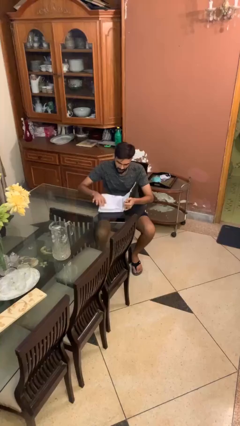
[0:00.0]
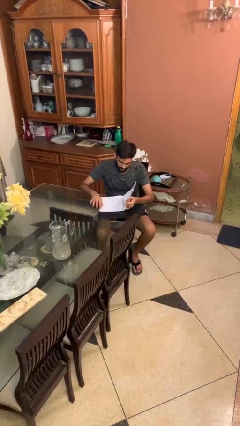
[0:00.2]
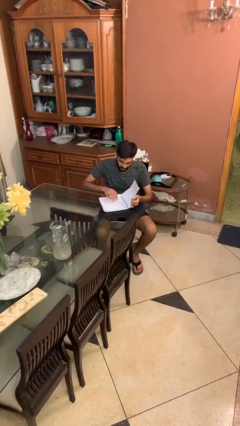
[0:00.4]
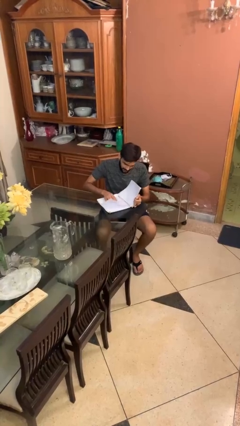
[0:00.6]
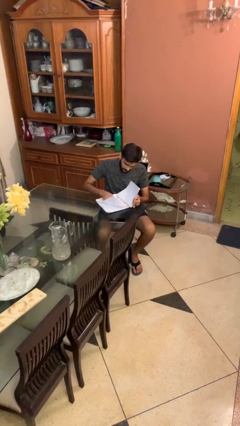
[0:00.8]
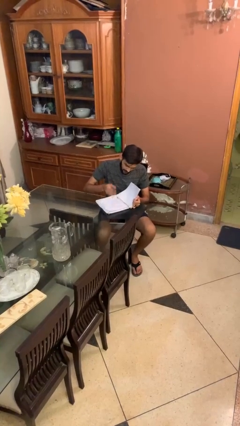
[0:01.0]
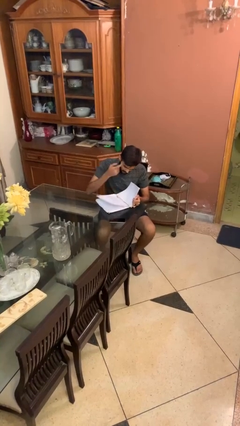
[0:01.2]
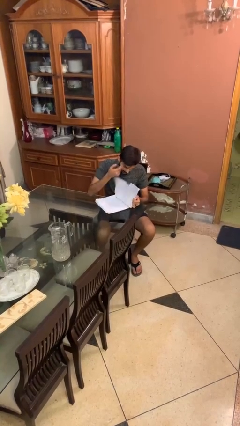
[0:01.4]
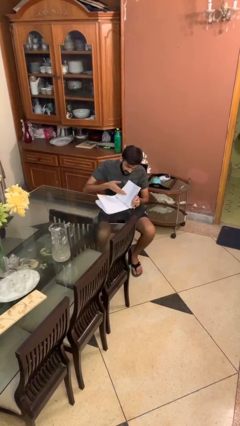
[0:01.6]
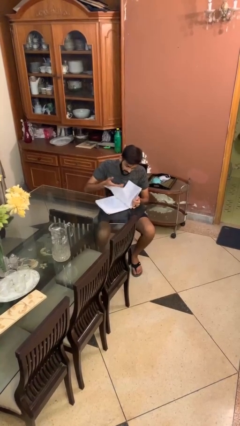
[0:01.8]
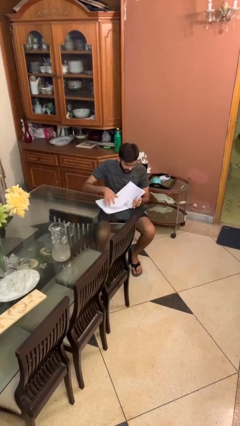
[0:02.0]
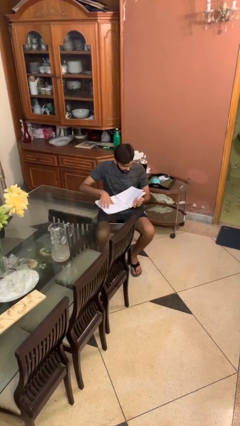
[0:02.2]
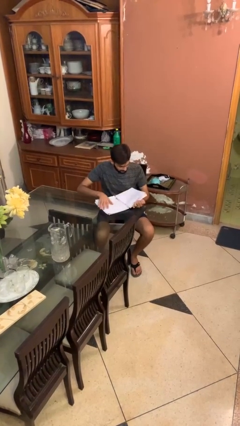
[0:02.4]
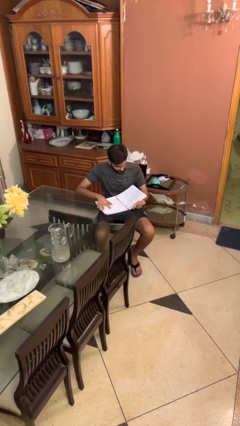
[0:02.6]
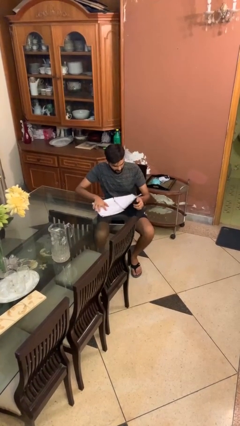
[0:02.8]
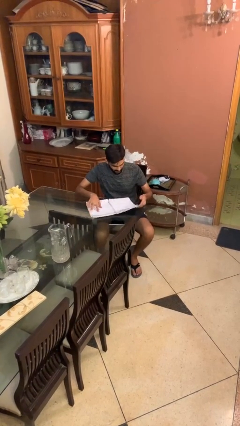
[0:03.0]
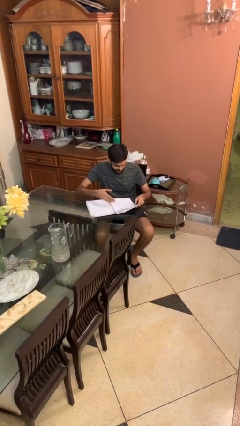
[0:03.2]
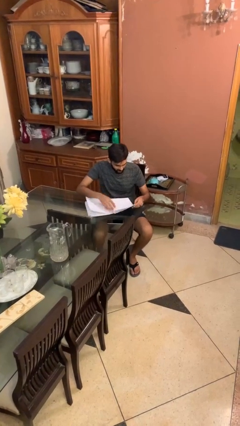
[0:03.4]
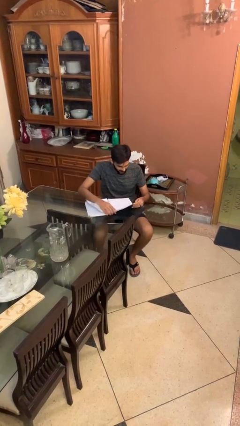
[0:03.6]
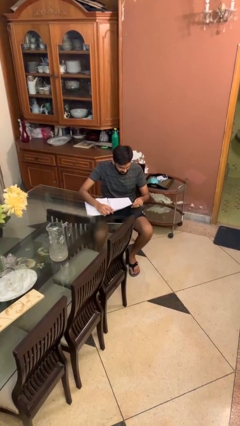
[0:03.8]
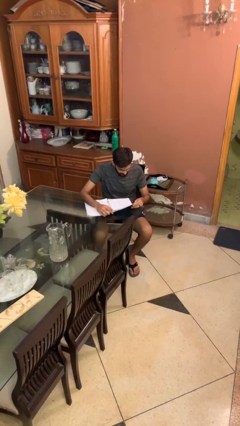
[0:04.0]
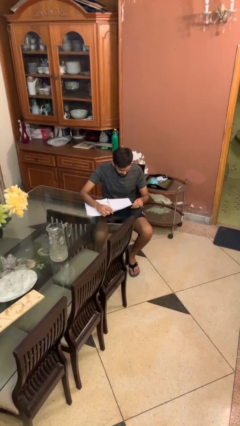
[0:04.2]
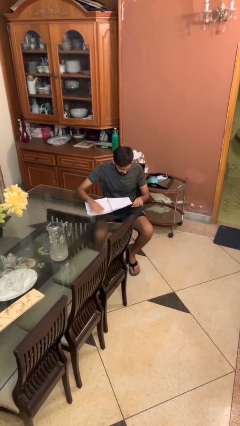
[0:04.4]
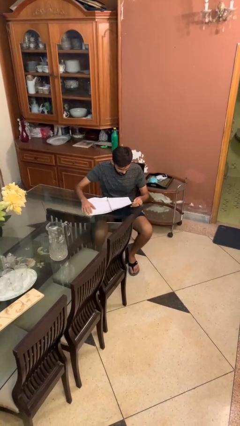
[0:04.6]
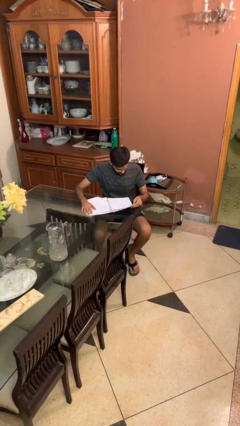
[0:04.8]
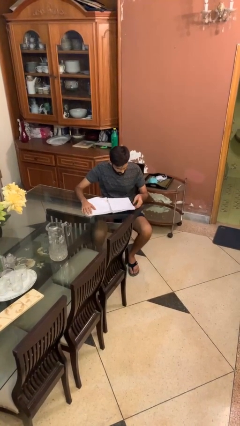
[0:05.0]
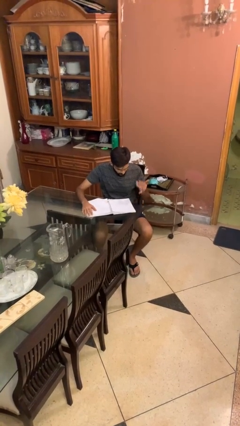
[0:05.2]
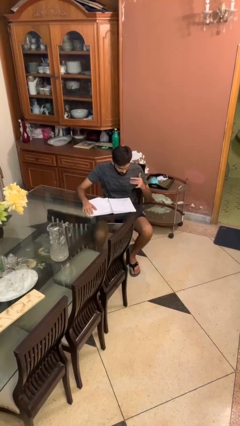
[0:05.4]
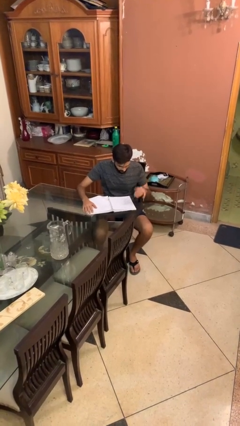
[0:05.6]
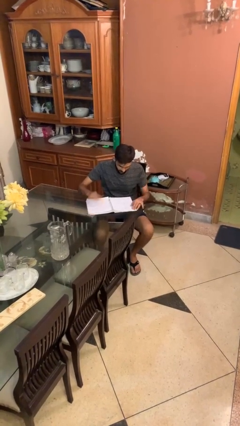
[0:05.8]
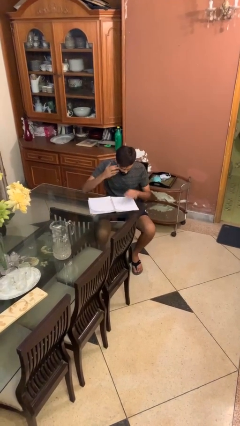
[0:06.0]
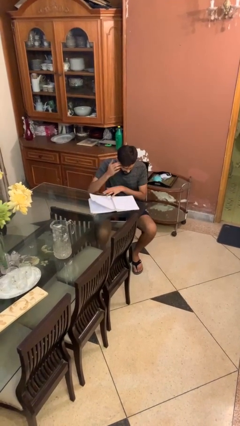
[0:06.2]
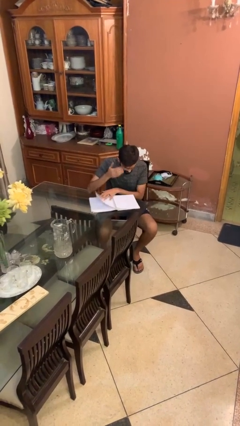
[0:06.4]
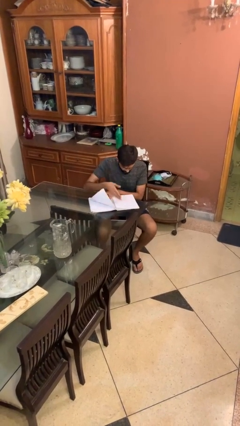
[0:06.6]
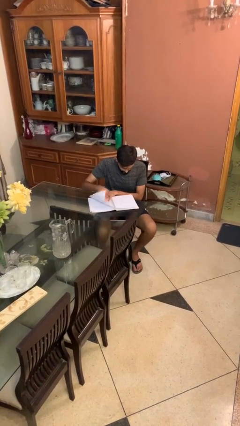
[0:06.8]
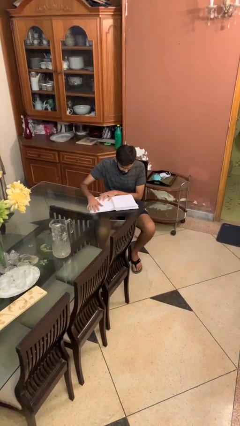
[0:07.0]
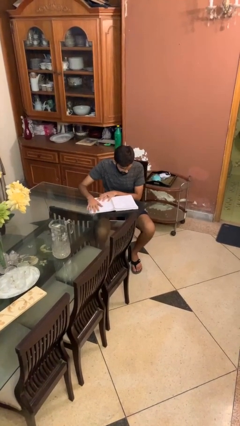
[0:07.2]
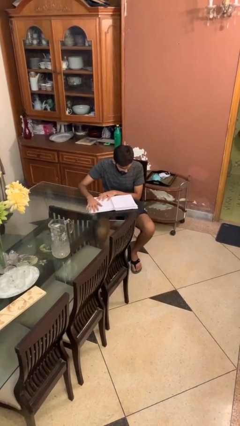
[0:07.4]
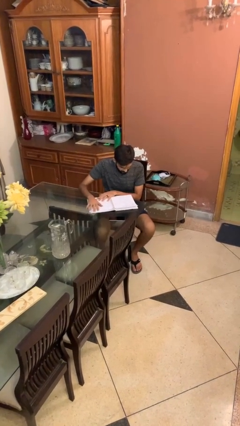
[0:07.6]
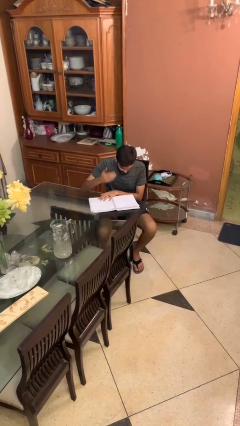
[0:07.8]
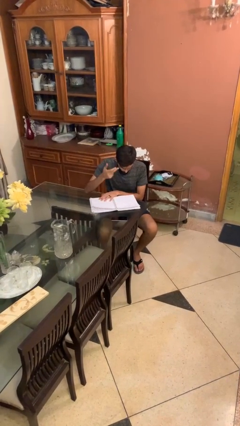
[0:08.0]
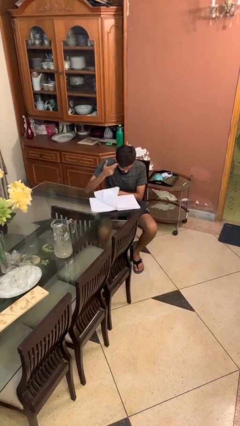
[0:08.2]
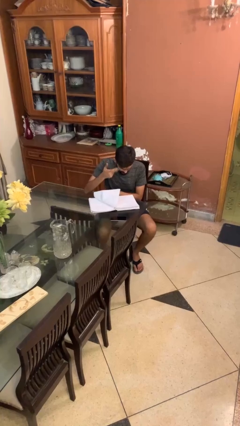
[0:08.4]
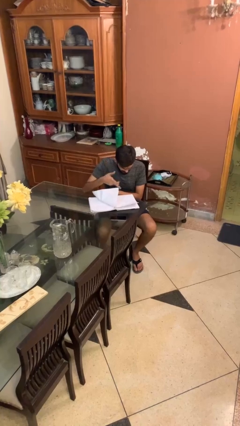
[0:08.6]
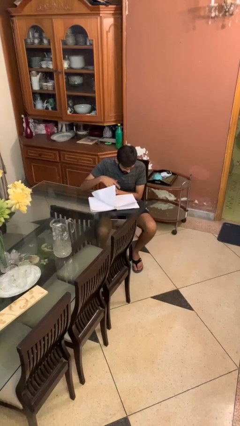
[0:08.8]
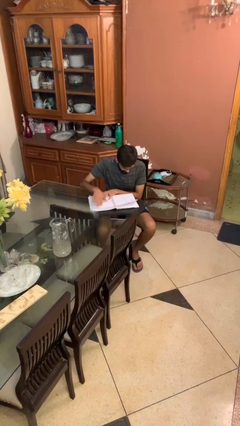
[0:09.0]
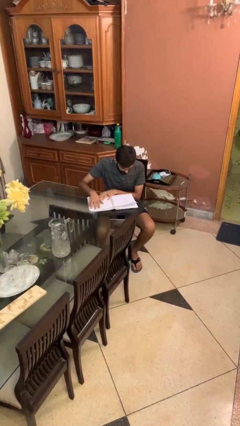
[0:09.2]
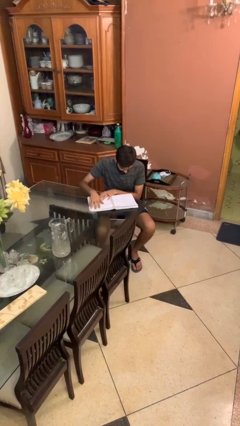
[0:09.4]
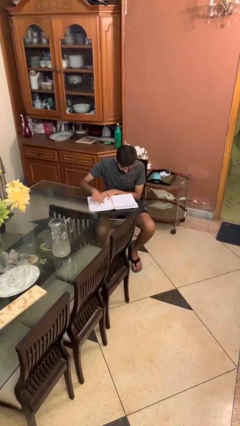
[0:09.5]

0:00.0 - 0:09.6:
person reads document

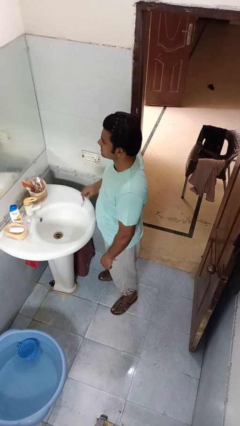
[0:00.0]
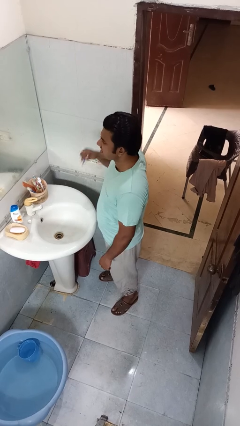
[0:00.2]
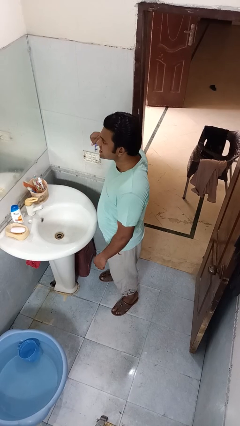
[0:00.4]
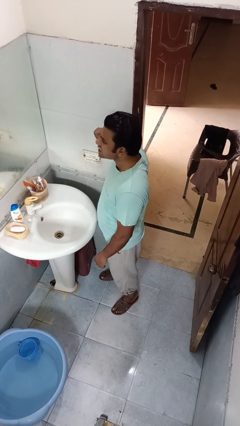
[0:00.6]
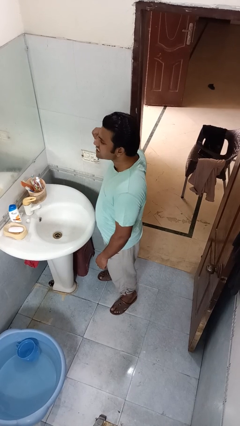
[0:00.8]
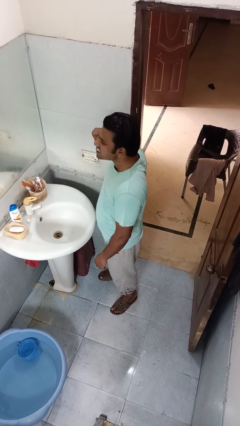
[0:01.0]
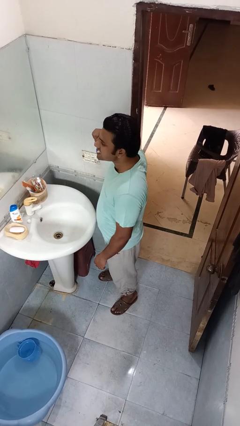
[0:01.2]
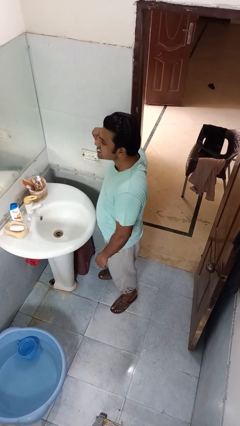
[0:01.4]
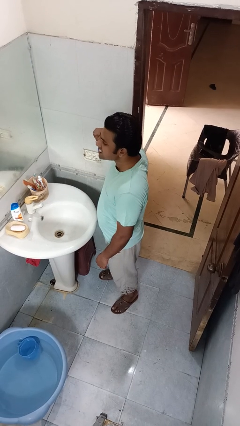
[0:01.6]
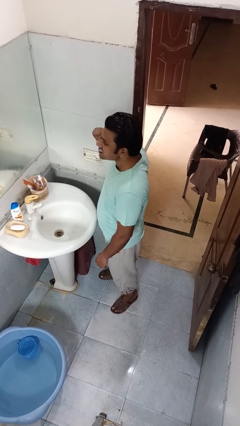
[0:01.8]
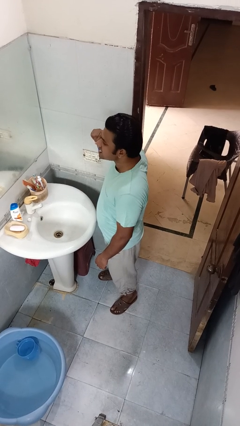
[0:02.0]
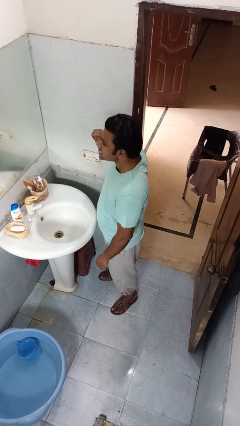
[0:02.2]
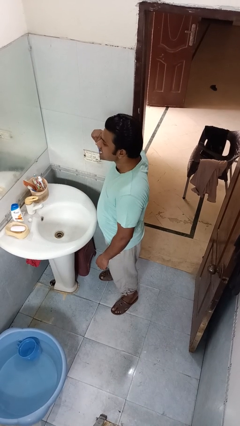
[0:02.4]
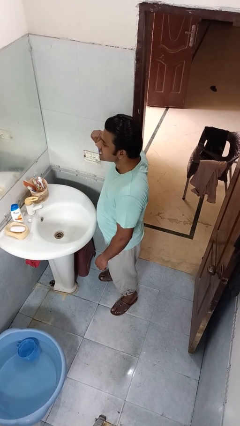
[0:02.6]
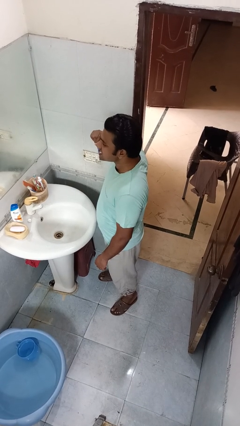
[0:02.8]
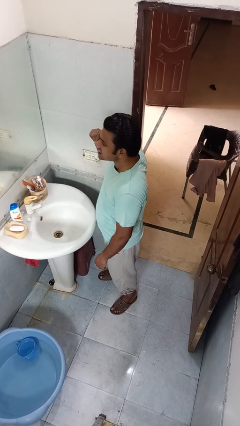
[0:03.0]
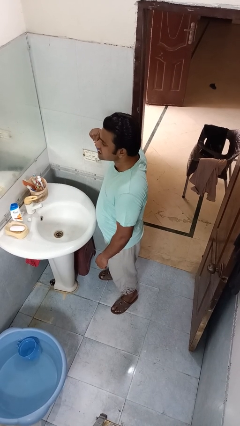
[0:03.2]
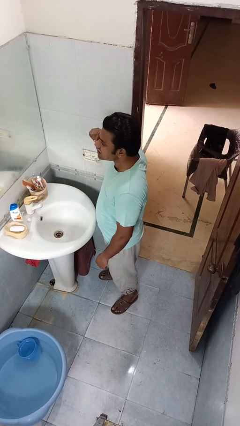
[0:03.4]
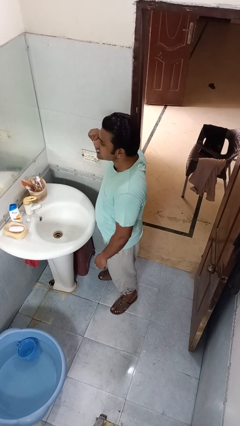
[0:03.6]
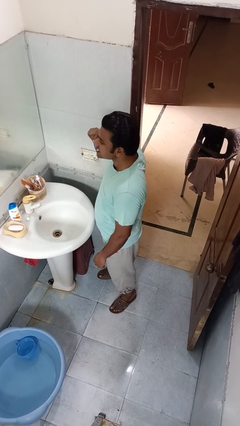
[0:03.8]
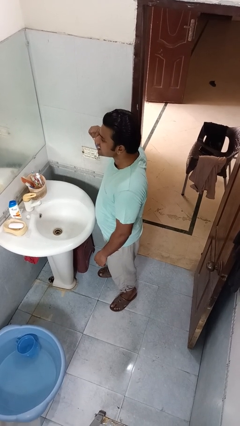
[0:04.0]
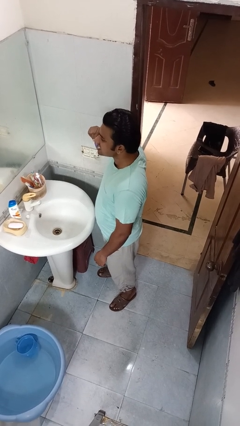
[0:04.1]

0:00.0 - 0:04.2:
person brushes teeth

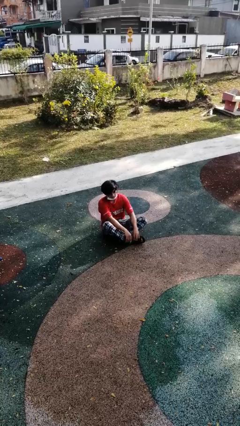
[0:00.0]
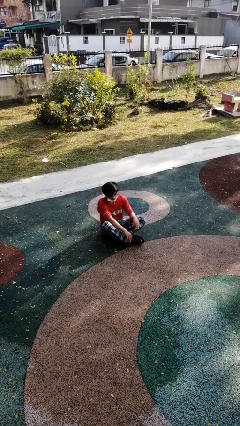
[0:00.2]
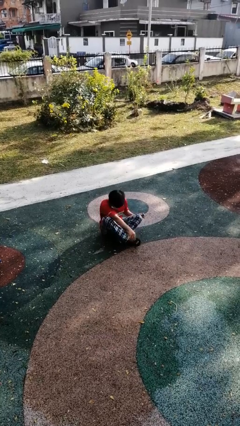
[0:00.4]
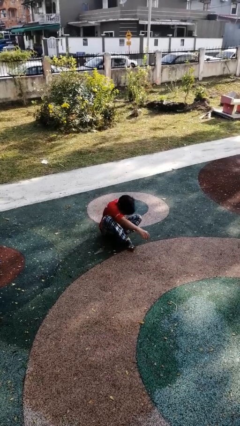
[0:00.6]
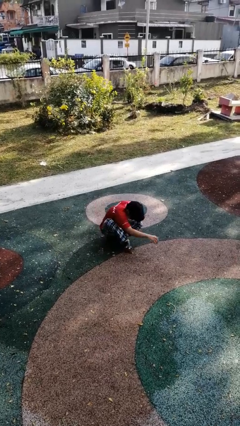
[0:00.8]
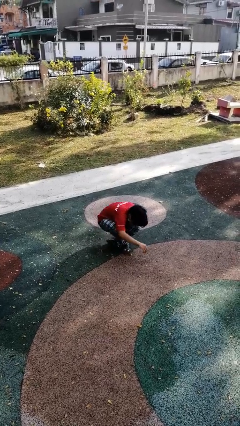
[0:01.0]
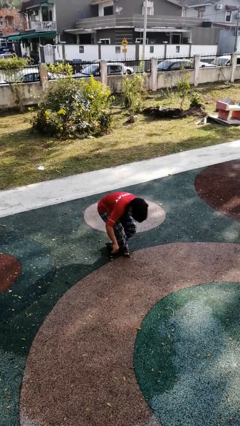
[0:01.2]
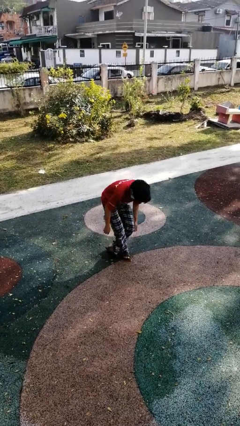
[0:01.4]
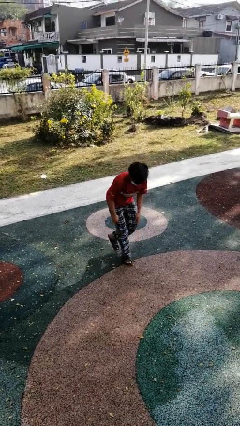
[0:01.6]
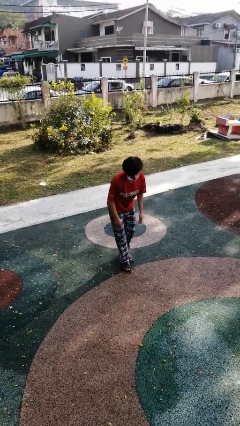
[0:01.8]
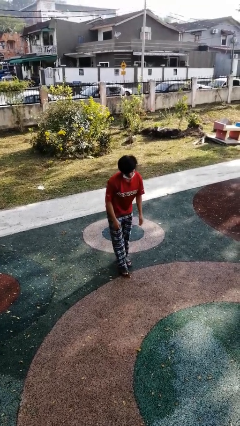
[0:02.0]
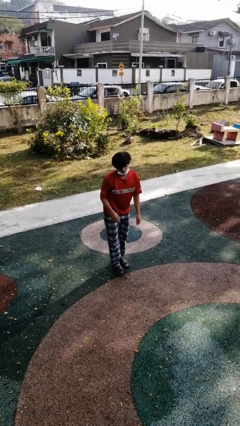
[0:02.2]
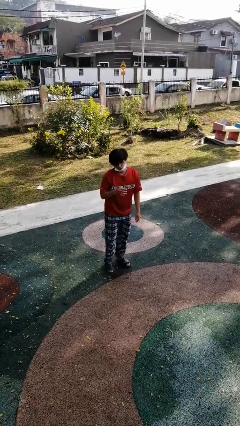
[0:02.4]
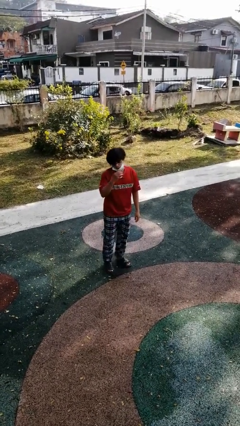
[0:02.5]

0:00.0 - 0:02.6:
person stands up from floor

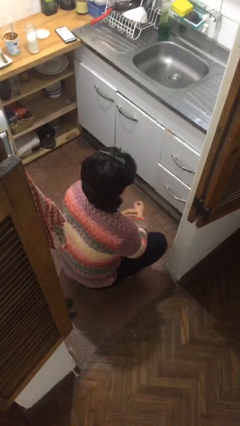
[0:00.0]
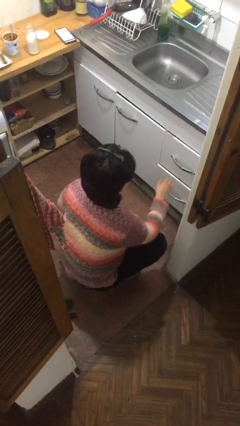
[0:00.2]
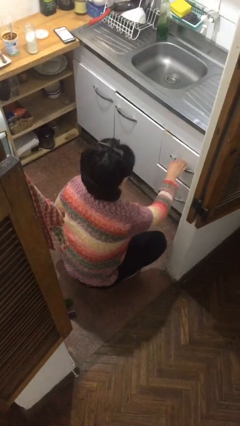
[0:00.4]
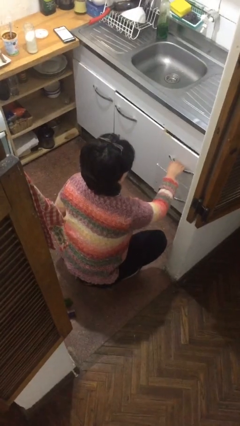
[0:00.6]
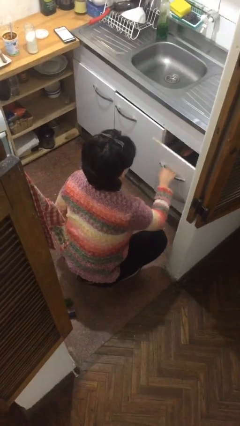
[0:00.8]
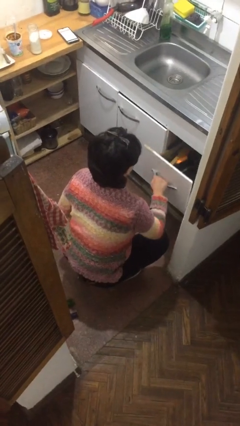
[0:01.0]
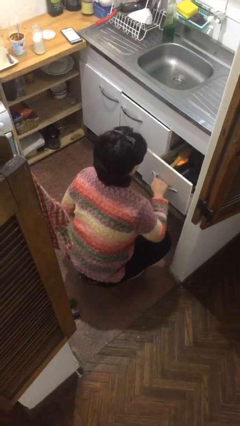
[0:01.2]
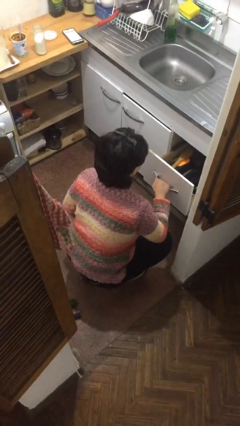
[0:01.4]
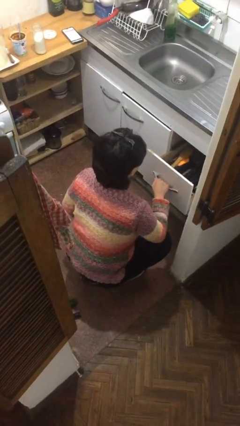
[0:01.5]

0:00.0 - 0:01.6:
person opens kitchen drawer
